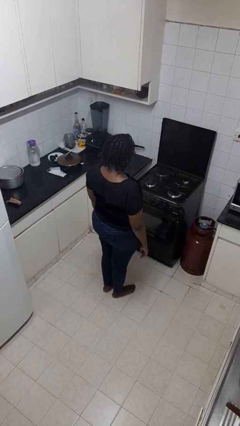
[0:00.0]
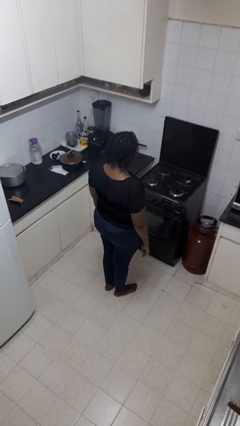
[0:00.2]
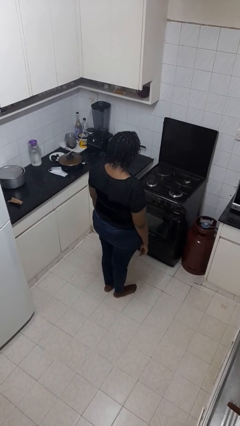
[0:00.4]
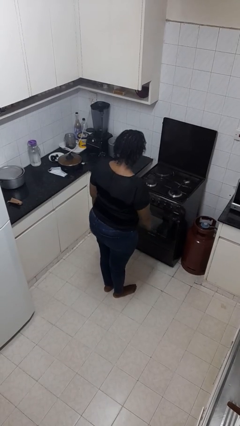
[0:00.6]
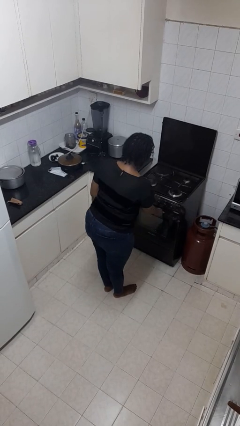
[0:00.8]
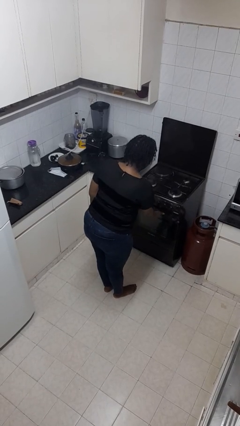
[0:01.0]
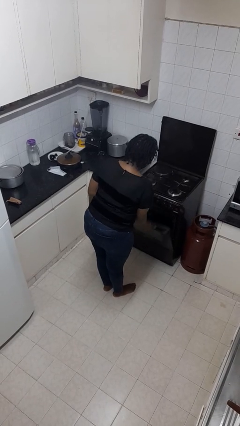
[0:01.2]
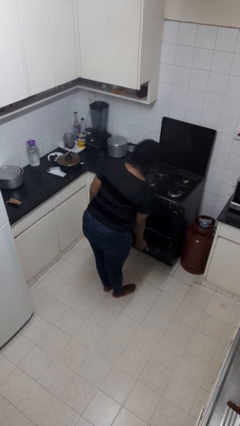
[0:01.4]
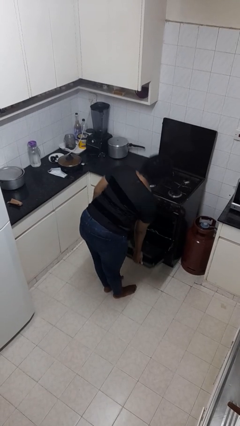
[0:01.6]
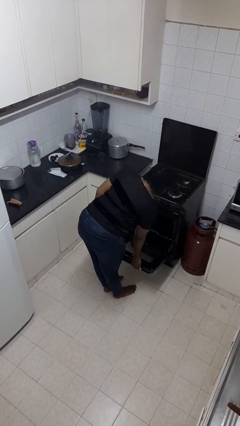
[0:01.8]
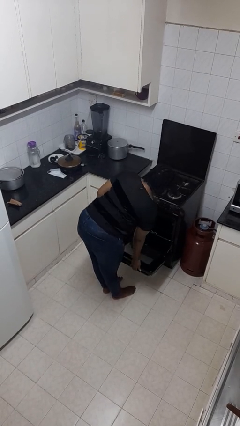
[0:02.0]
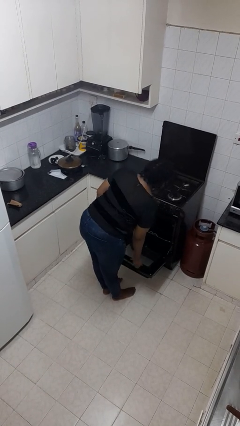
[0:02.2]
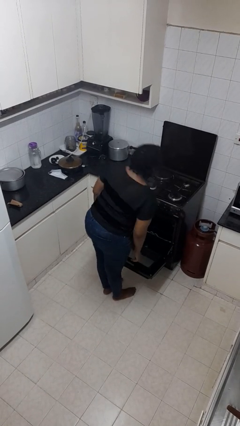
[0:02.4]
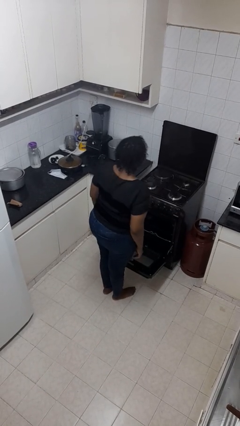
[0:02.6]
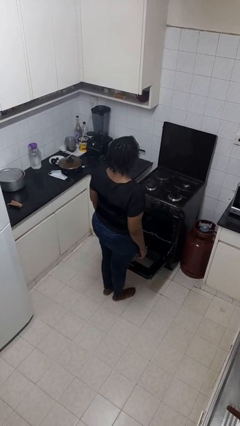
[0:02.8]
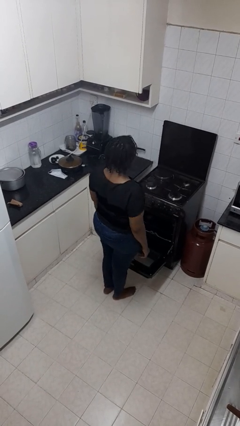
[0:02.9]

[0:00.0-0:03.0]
person opens oven door

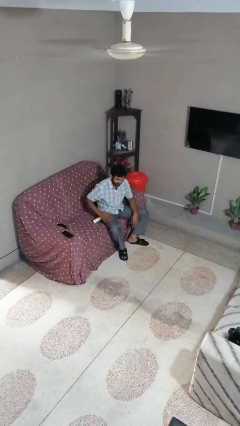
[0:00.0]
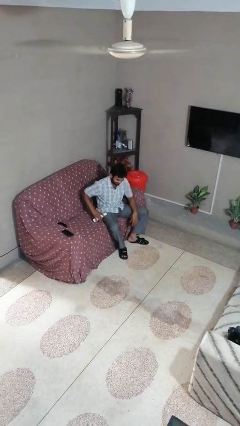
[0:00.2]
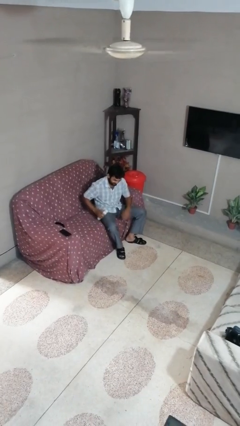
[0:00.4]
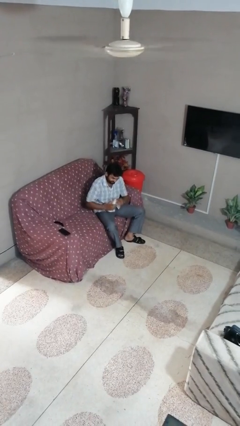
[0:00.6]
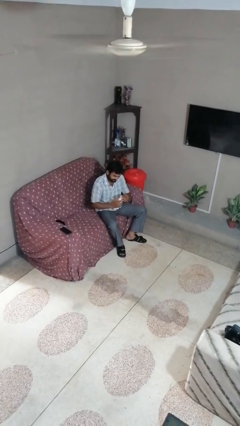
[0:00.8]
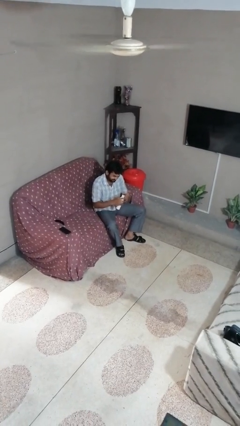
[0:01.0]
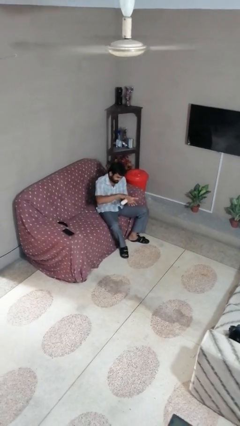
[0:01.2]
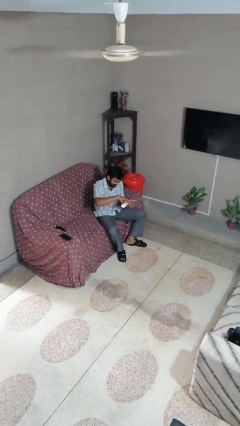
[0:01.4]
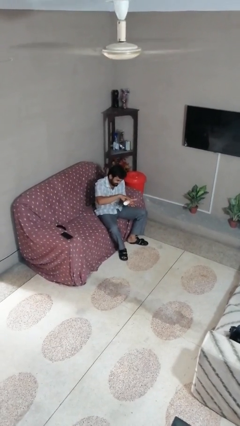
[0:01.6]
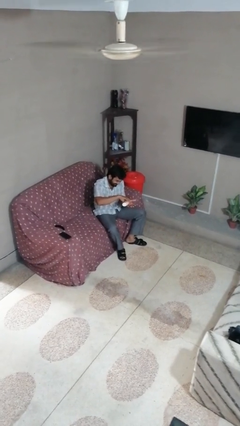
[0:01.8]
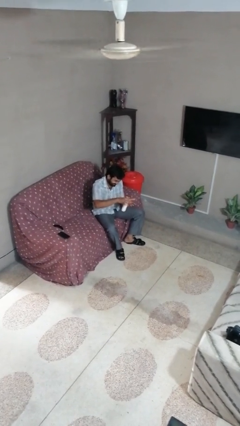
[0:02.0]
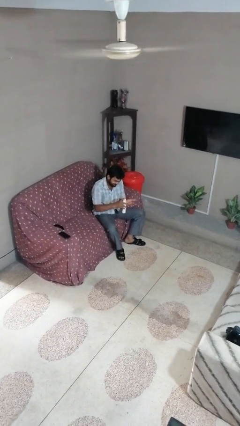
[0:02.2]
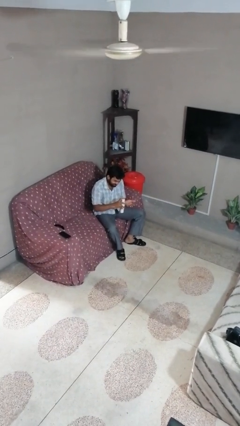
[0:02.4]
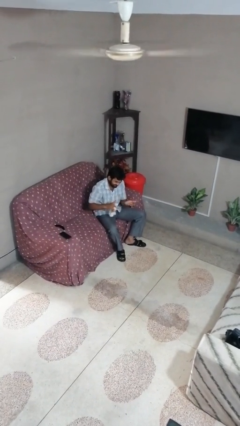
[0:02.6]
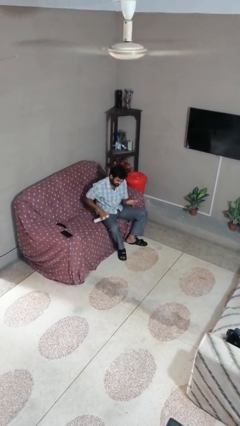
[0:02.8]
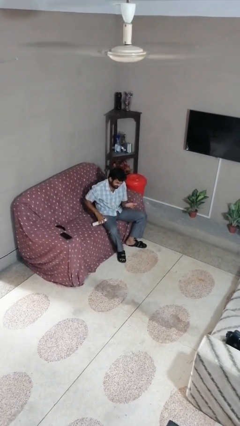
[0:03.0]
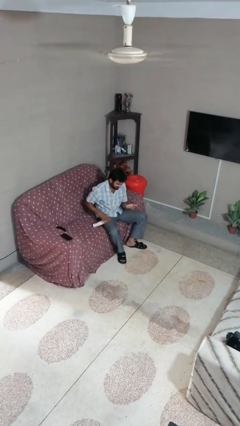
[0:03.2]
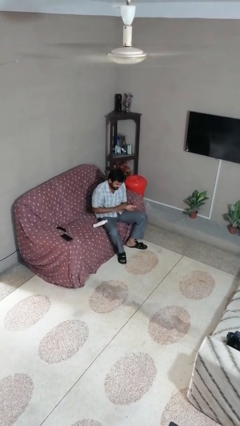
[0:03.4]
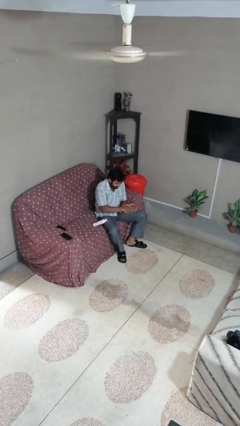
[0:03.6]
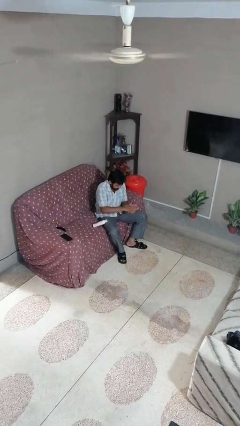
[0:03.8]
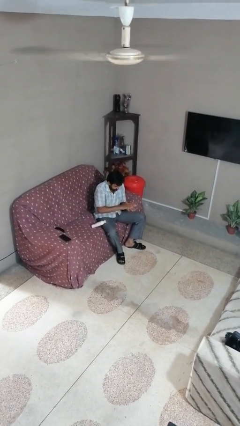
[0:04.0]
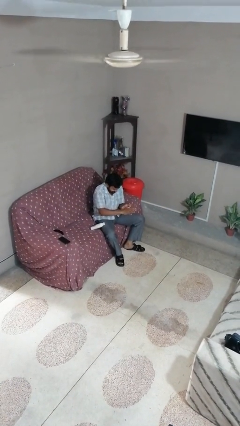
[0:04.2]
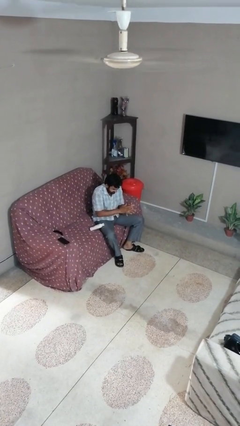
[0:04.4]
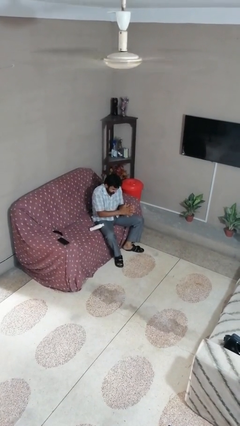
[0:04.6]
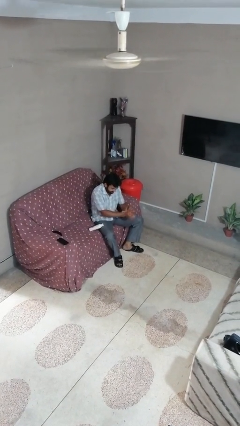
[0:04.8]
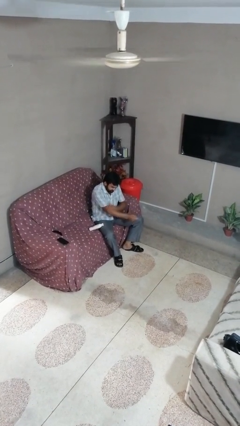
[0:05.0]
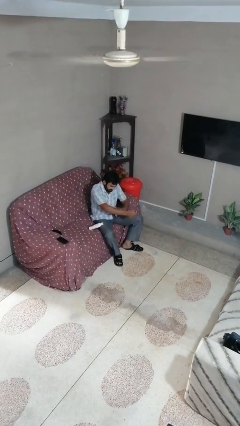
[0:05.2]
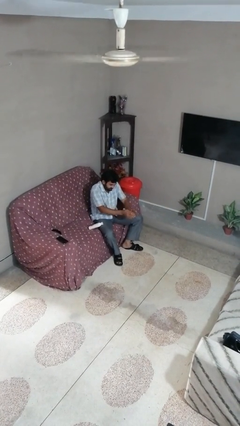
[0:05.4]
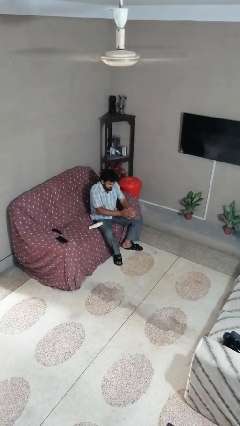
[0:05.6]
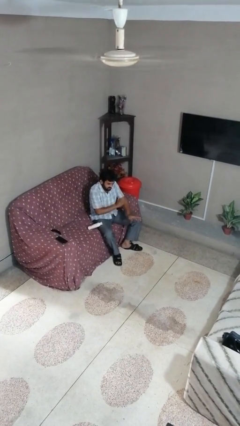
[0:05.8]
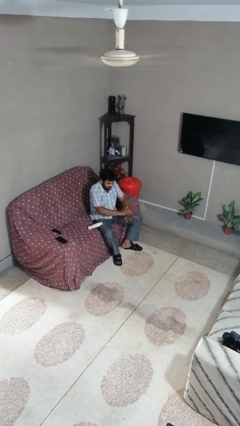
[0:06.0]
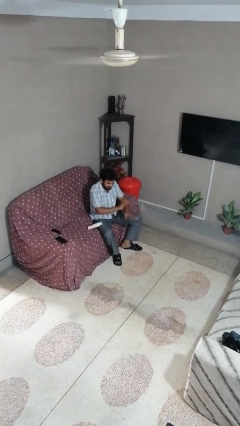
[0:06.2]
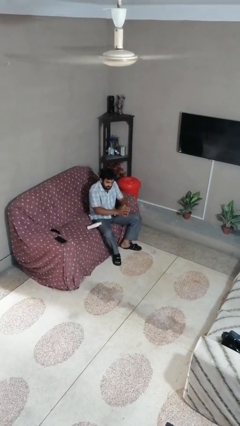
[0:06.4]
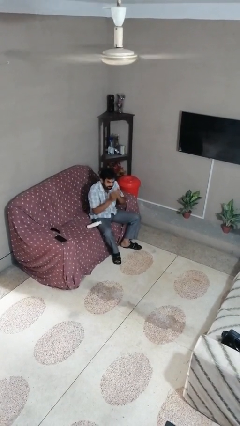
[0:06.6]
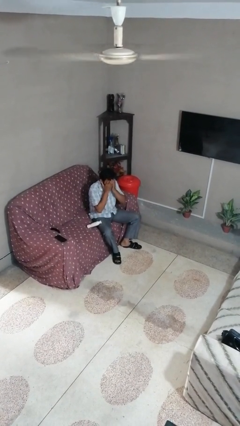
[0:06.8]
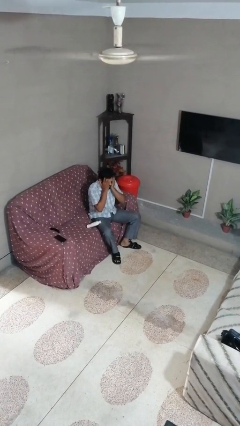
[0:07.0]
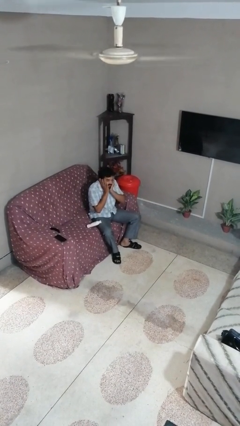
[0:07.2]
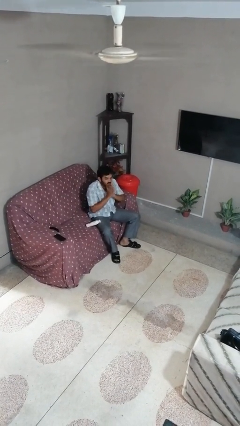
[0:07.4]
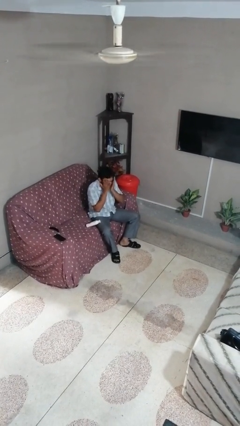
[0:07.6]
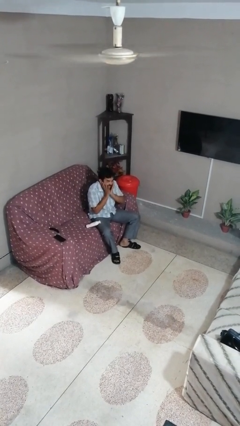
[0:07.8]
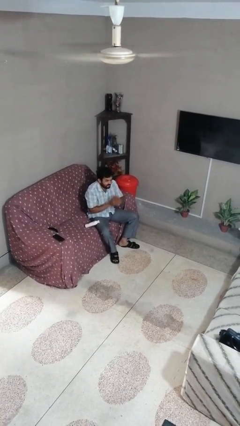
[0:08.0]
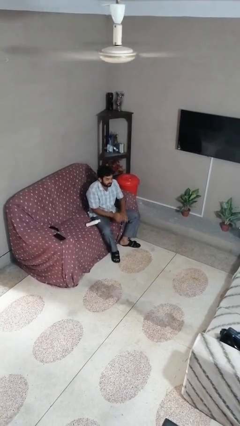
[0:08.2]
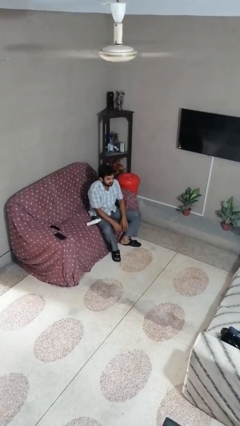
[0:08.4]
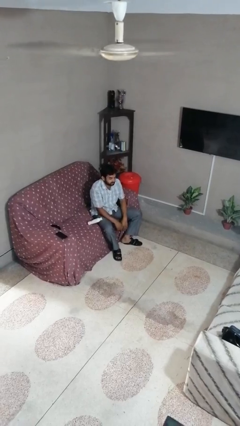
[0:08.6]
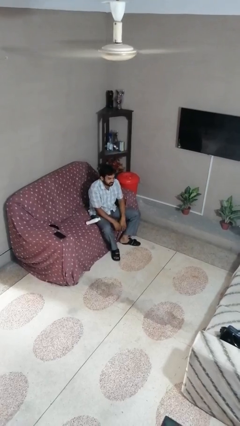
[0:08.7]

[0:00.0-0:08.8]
person applies sunscreen

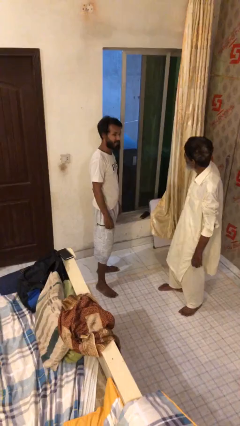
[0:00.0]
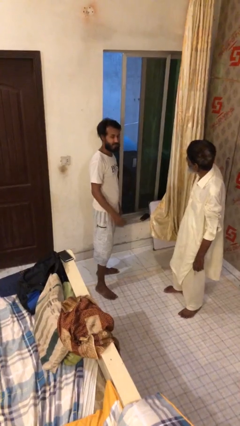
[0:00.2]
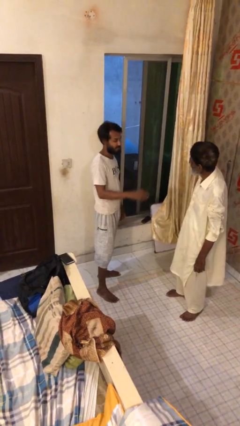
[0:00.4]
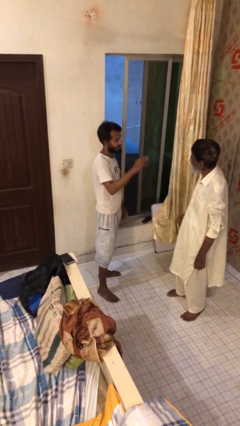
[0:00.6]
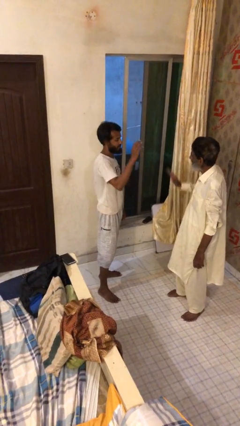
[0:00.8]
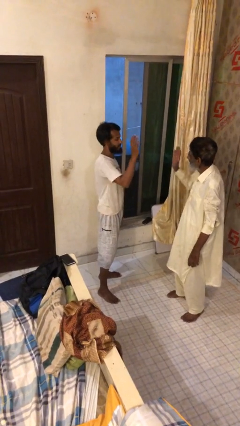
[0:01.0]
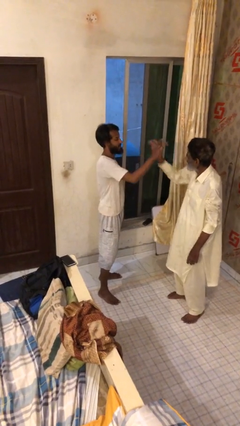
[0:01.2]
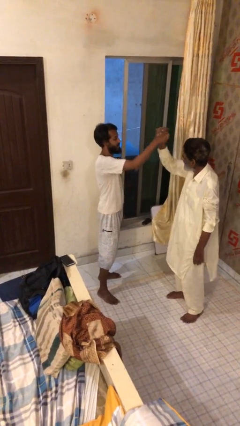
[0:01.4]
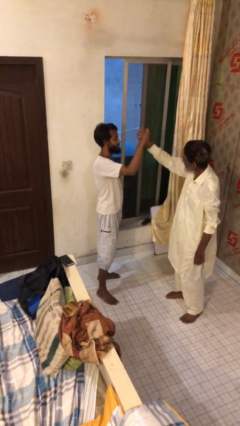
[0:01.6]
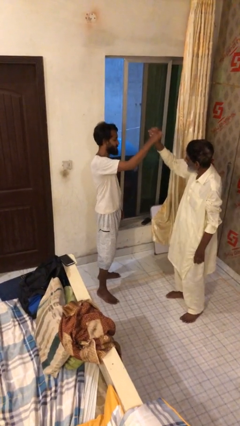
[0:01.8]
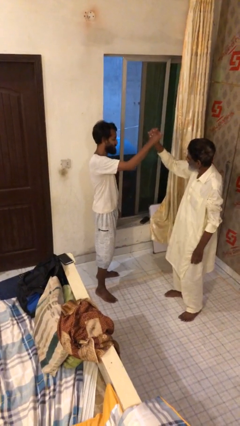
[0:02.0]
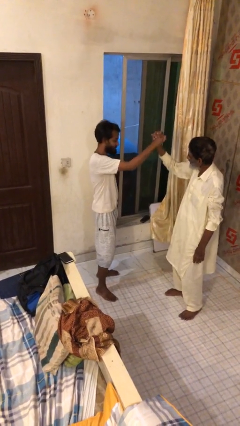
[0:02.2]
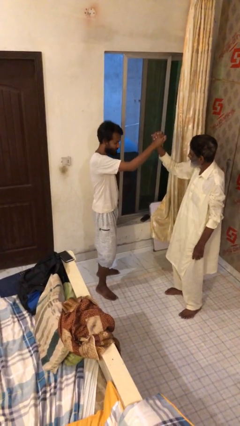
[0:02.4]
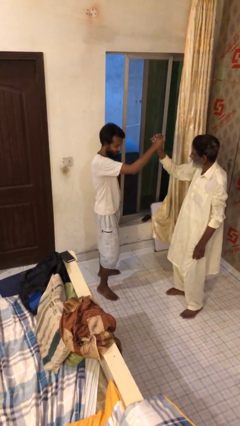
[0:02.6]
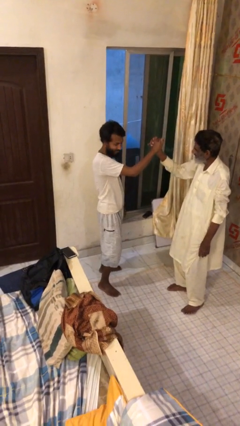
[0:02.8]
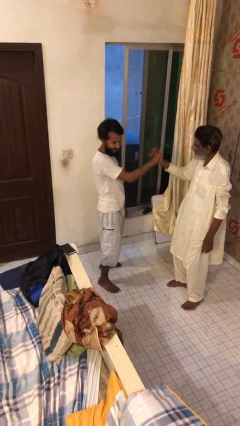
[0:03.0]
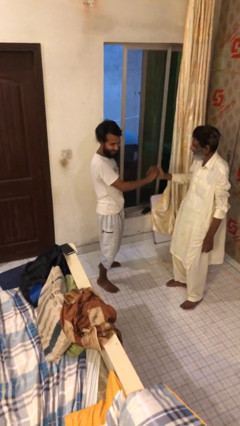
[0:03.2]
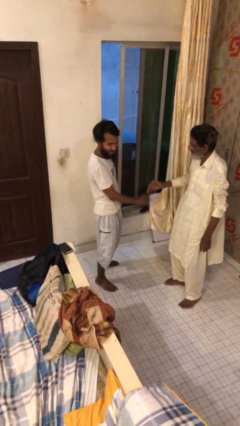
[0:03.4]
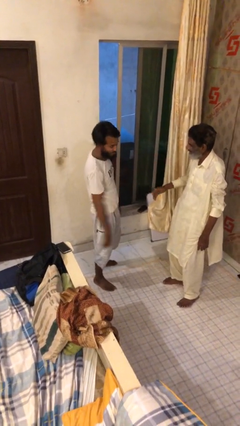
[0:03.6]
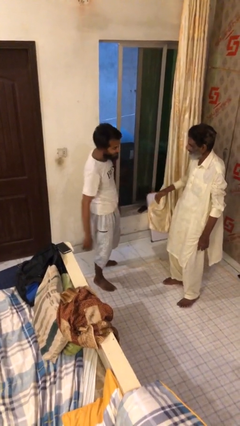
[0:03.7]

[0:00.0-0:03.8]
person highfives hand

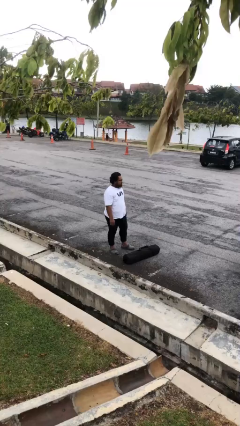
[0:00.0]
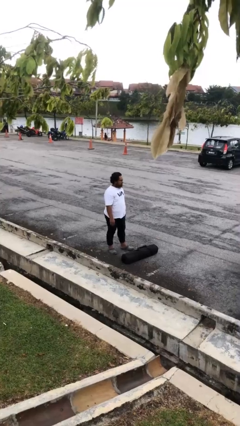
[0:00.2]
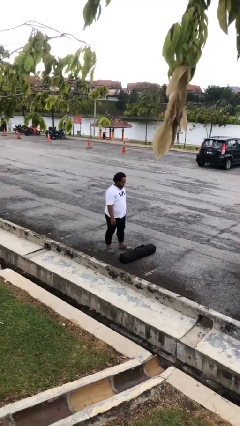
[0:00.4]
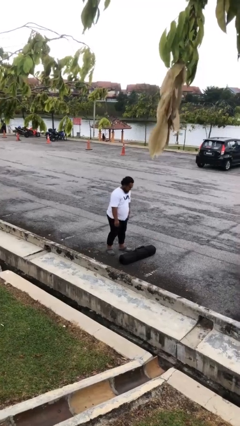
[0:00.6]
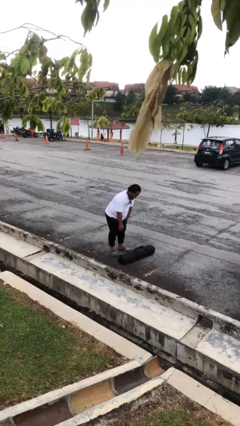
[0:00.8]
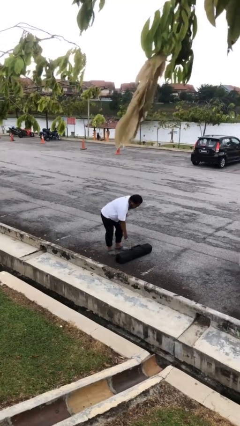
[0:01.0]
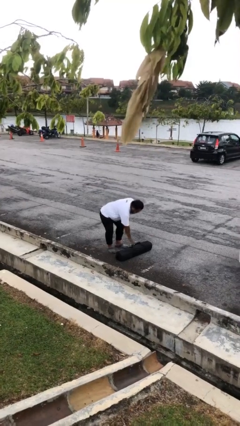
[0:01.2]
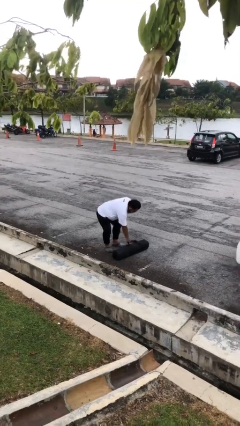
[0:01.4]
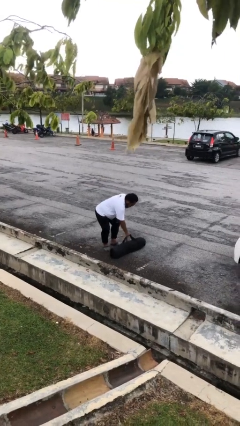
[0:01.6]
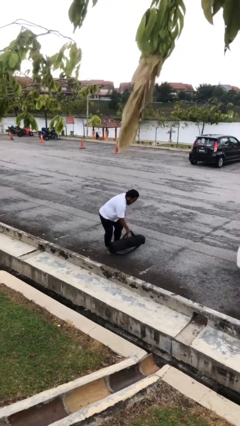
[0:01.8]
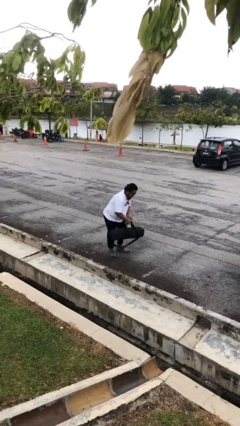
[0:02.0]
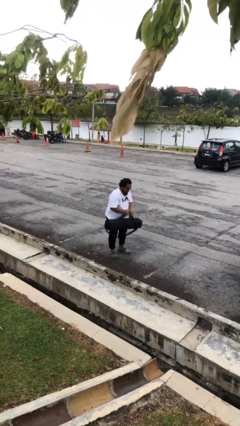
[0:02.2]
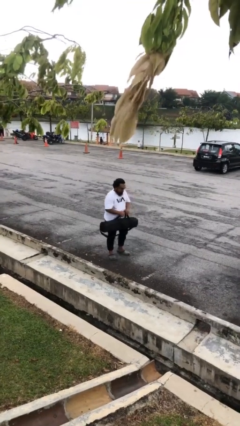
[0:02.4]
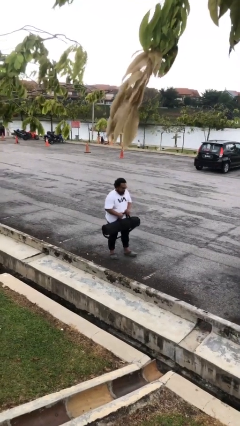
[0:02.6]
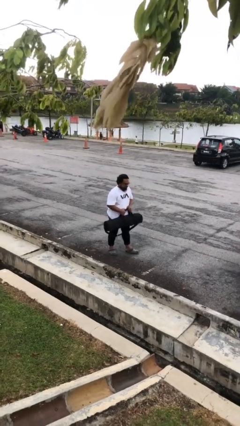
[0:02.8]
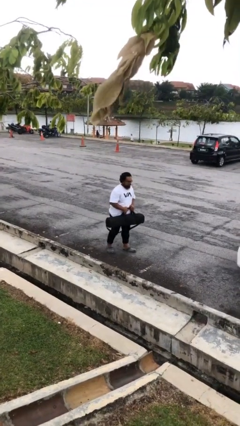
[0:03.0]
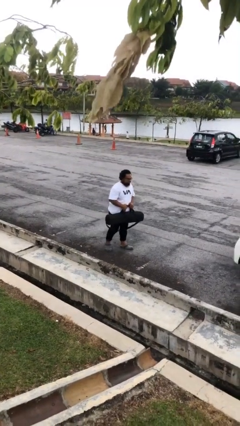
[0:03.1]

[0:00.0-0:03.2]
person picks up object from floor
